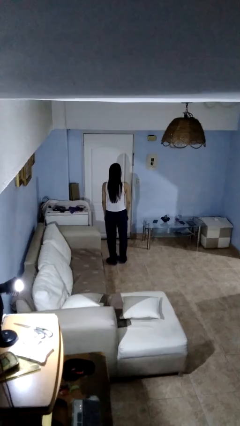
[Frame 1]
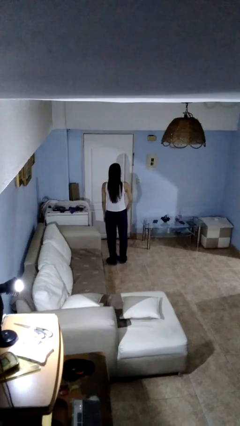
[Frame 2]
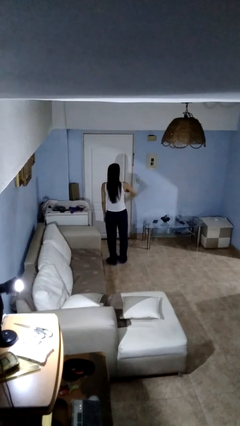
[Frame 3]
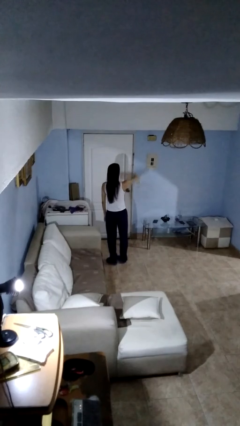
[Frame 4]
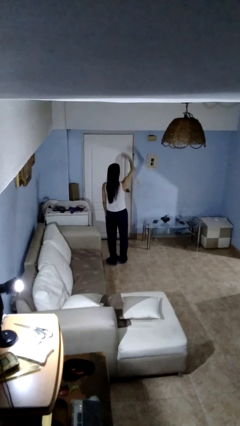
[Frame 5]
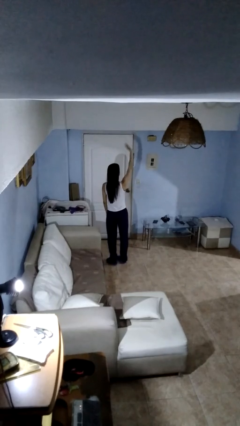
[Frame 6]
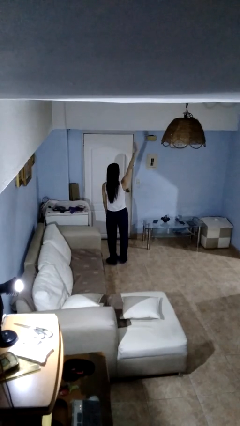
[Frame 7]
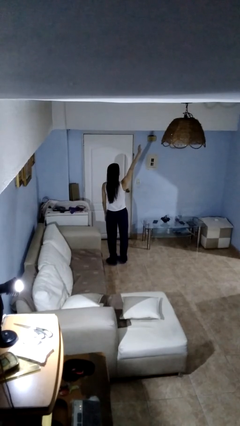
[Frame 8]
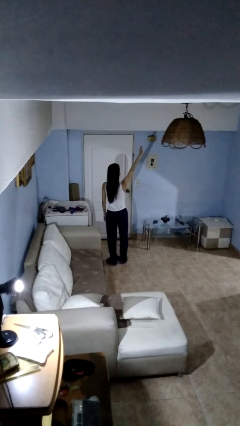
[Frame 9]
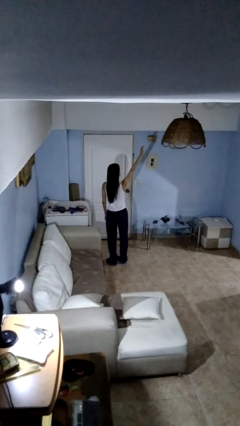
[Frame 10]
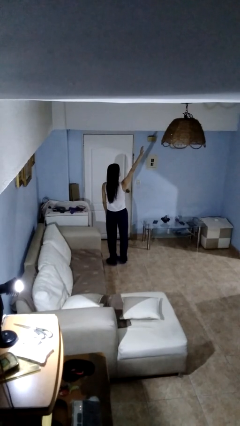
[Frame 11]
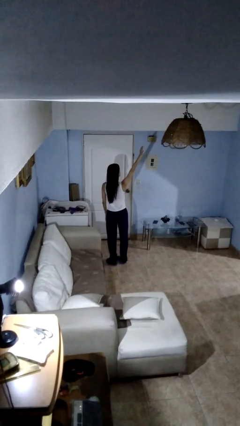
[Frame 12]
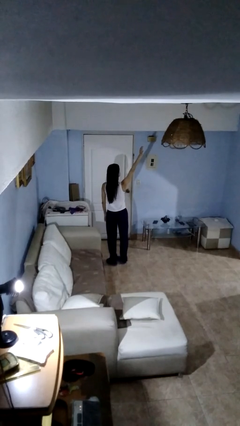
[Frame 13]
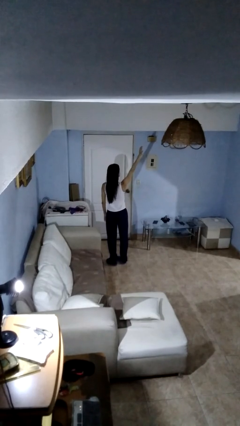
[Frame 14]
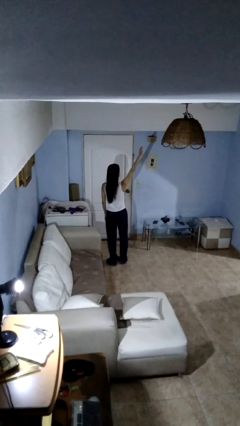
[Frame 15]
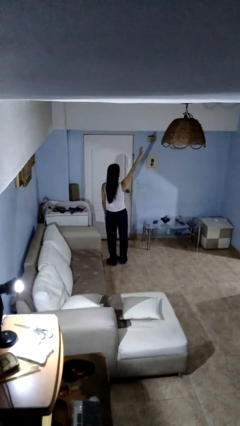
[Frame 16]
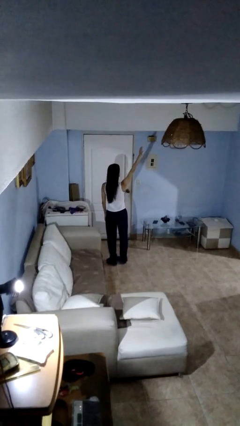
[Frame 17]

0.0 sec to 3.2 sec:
person gestures swipe up

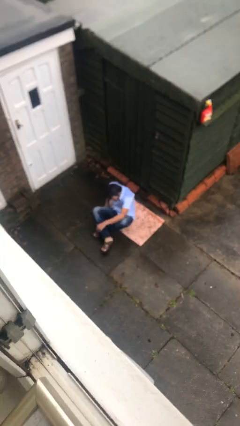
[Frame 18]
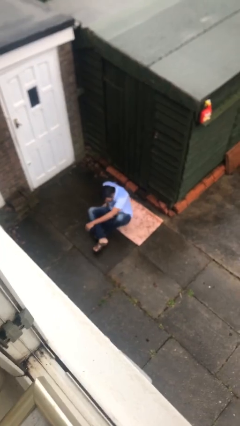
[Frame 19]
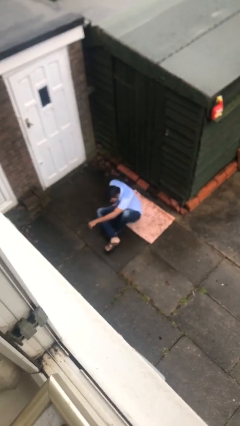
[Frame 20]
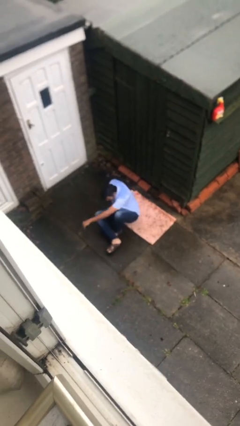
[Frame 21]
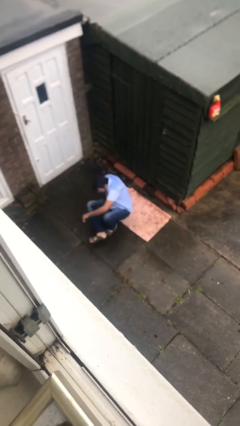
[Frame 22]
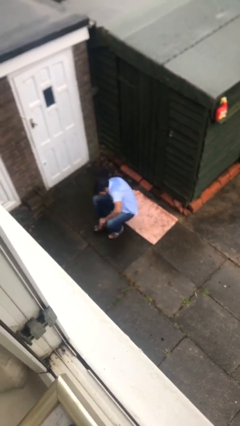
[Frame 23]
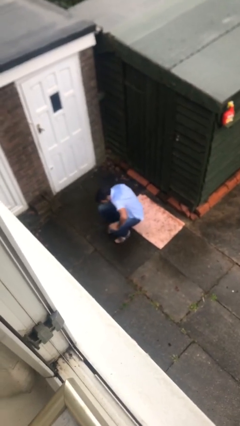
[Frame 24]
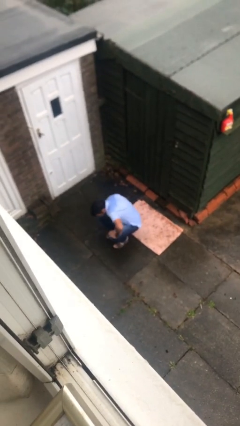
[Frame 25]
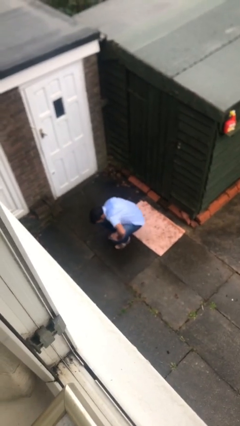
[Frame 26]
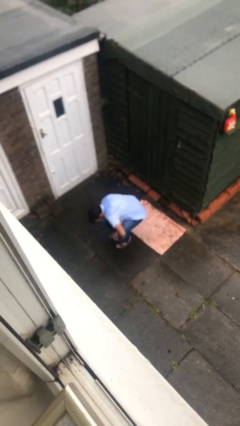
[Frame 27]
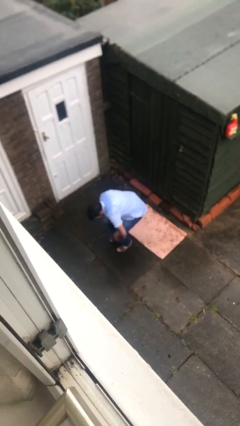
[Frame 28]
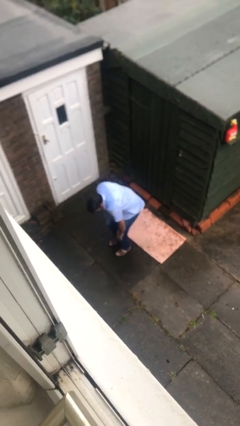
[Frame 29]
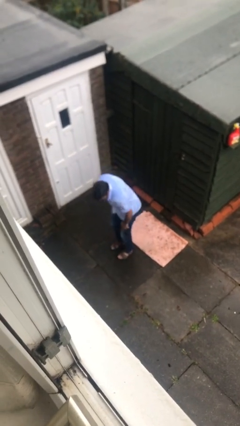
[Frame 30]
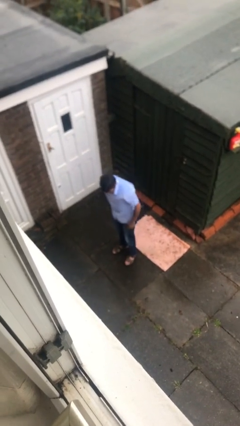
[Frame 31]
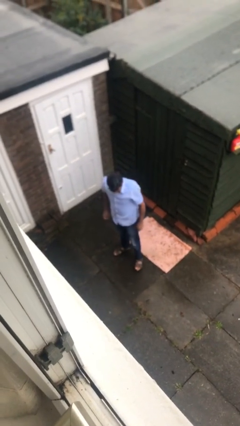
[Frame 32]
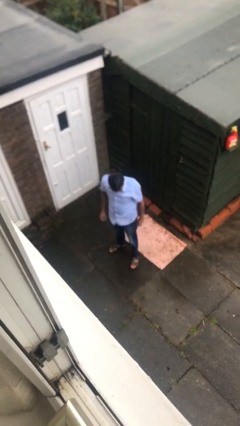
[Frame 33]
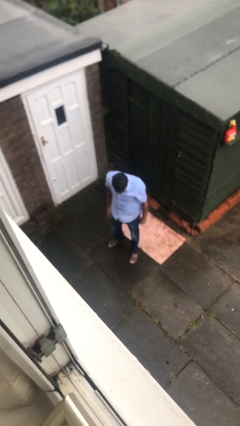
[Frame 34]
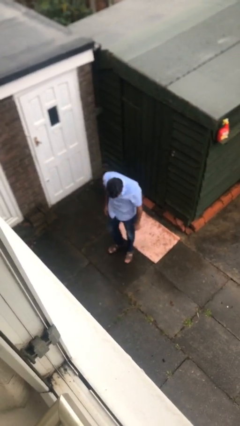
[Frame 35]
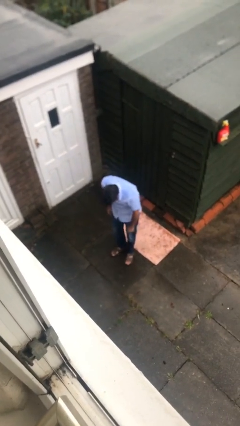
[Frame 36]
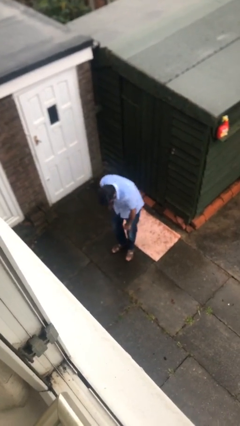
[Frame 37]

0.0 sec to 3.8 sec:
person stands up

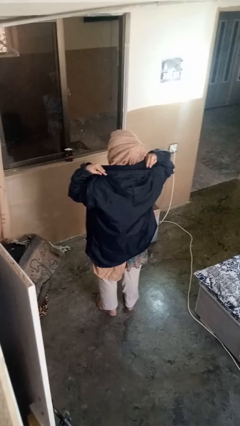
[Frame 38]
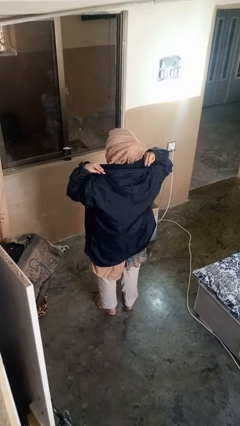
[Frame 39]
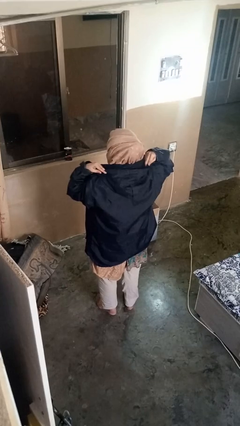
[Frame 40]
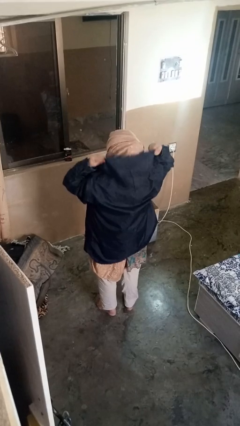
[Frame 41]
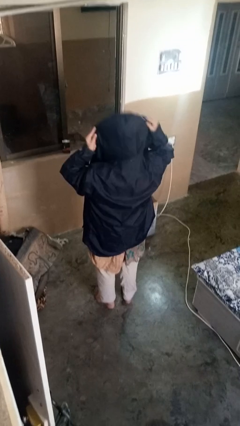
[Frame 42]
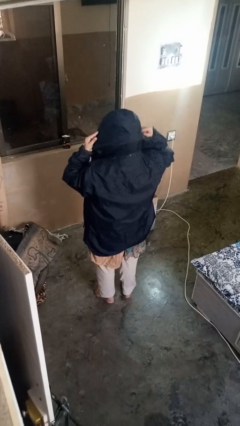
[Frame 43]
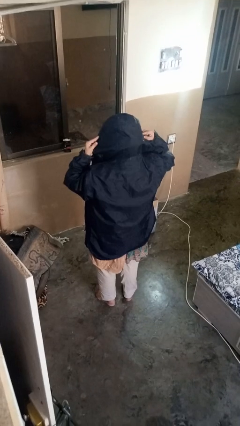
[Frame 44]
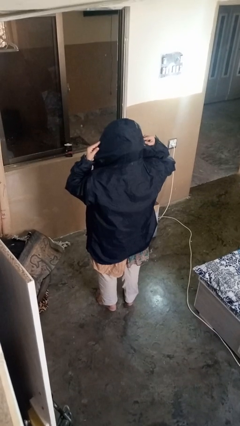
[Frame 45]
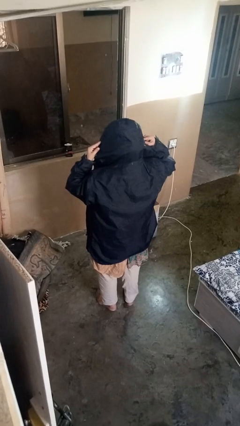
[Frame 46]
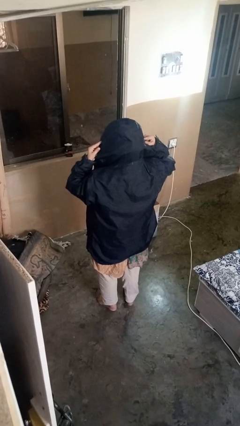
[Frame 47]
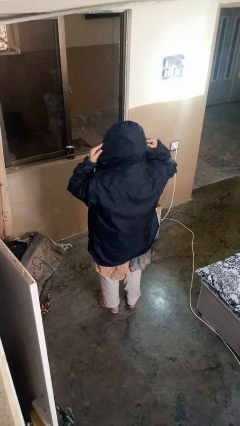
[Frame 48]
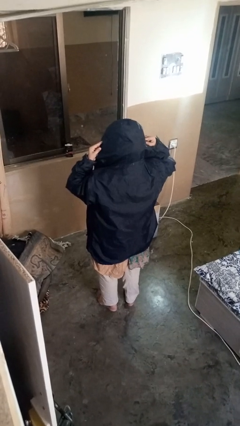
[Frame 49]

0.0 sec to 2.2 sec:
person puts on hat

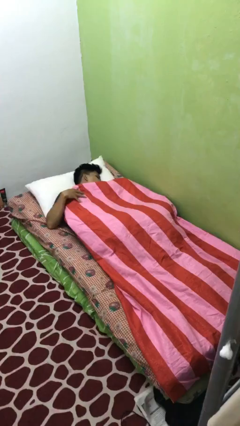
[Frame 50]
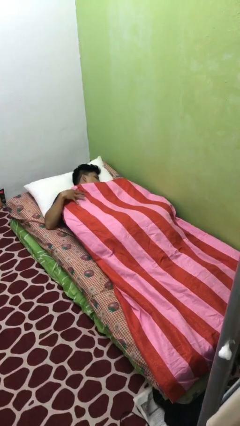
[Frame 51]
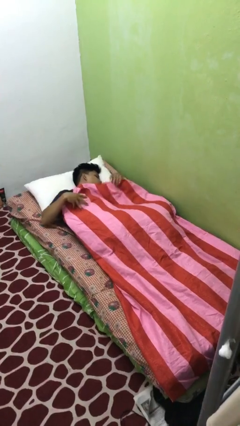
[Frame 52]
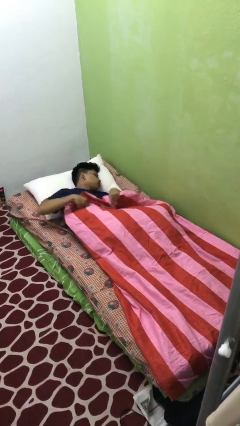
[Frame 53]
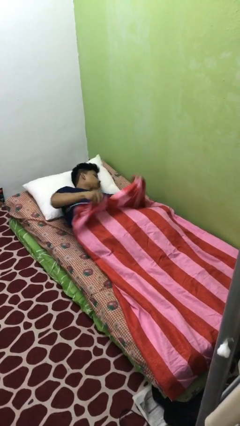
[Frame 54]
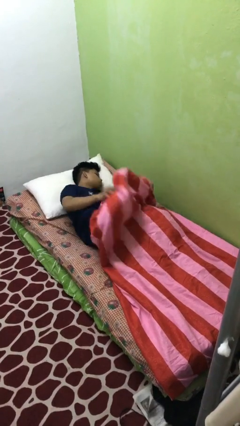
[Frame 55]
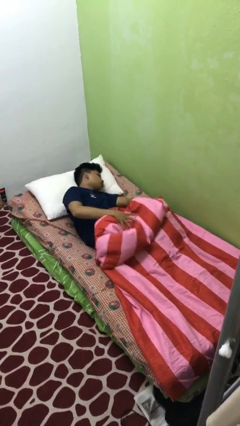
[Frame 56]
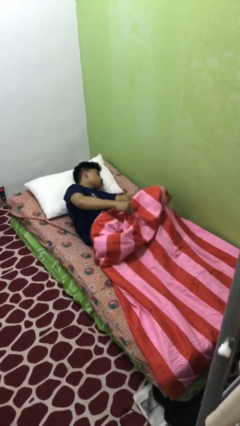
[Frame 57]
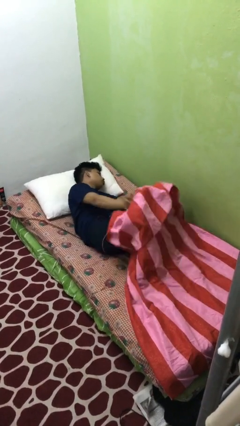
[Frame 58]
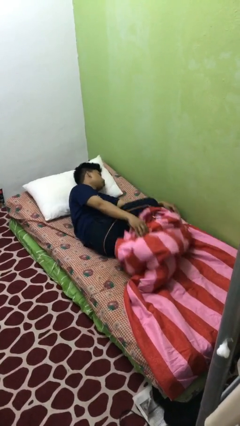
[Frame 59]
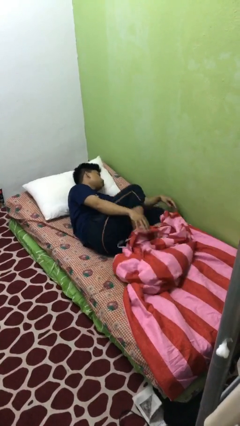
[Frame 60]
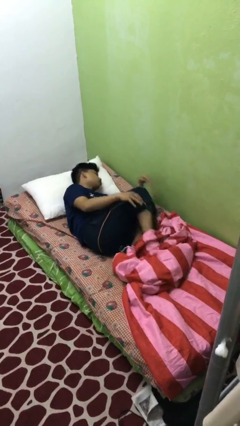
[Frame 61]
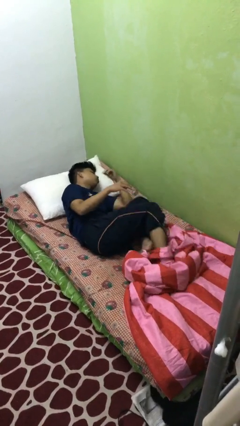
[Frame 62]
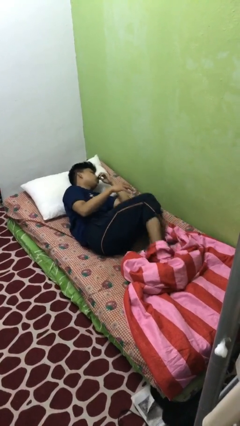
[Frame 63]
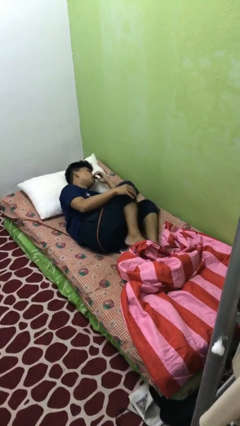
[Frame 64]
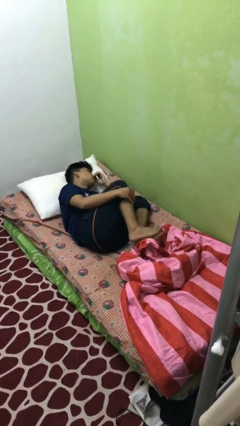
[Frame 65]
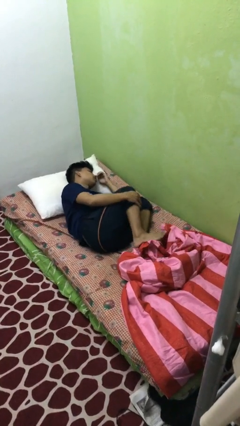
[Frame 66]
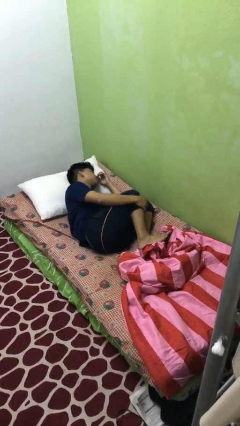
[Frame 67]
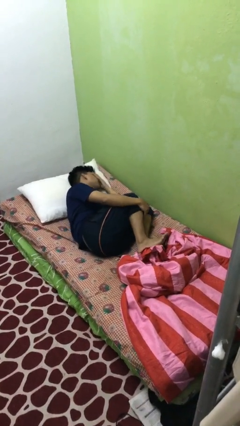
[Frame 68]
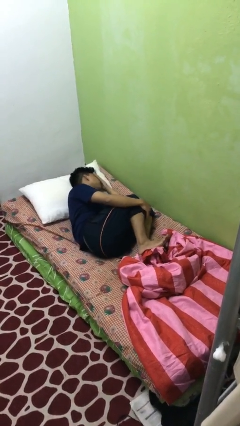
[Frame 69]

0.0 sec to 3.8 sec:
person uncovers with bedsheets

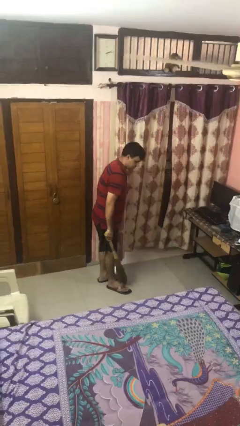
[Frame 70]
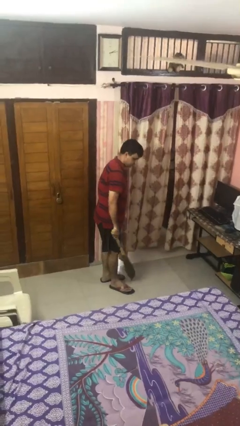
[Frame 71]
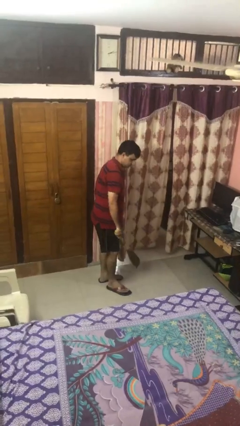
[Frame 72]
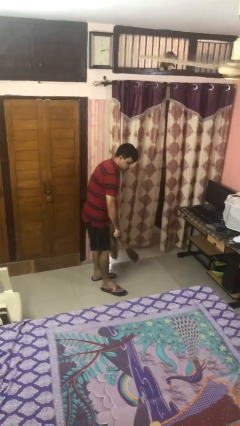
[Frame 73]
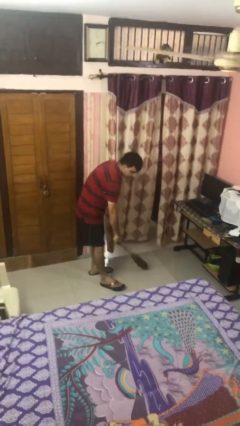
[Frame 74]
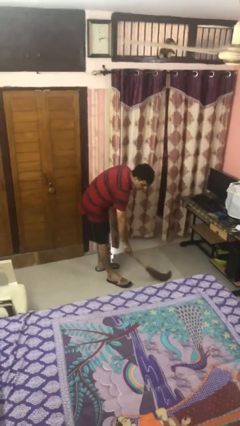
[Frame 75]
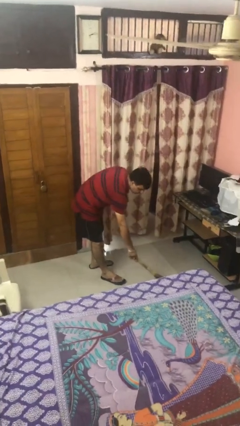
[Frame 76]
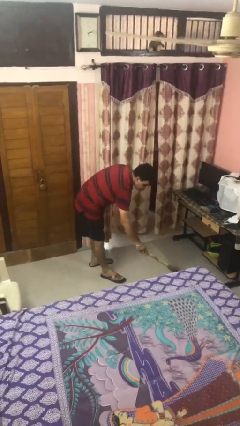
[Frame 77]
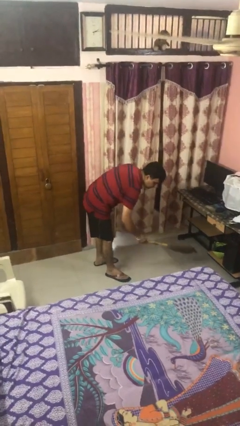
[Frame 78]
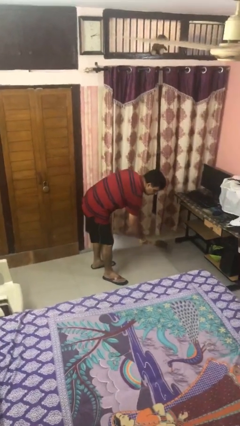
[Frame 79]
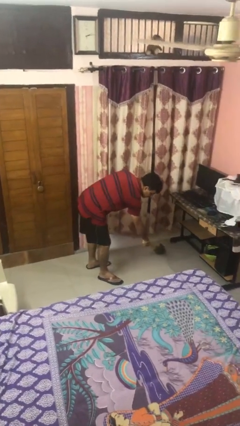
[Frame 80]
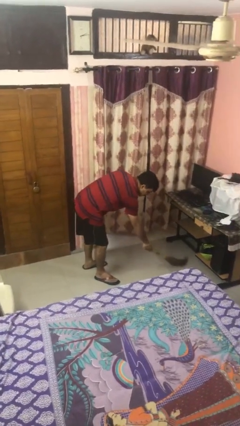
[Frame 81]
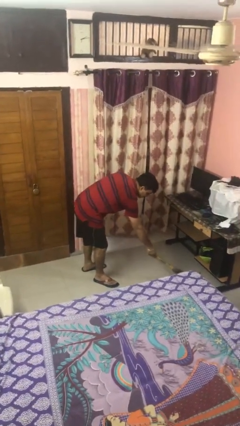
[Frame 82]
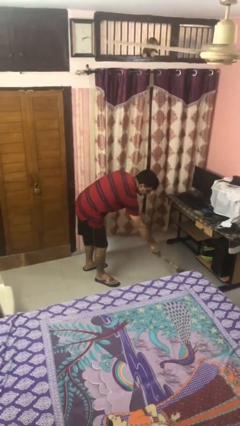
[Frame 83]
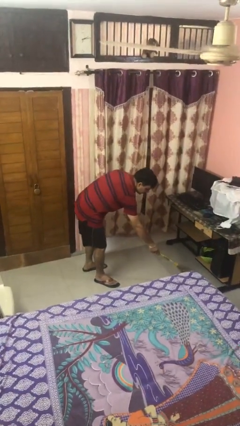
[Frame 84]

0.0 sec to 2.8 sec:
person sweeps floor

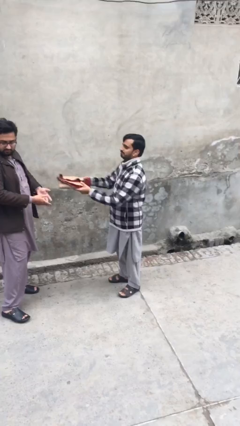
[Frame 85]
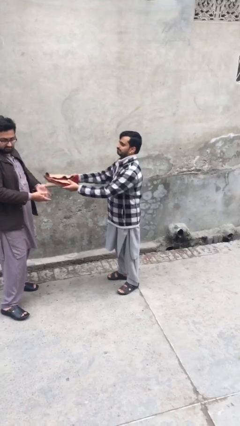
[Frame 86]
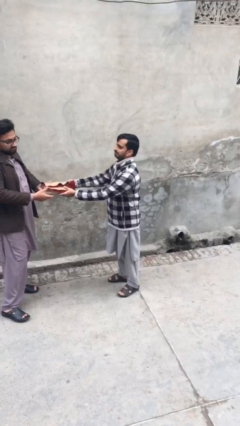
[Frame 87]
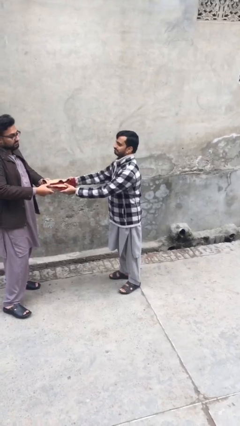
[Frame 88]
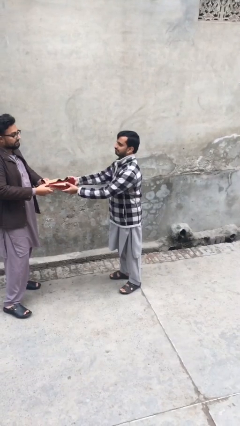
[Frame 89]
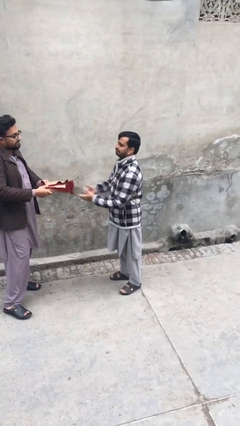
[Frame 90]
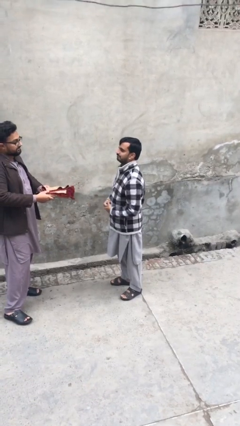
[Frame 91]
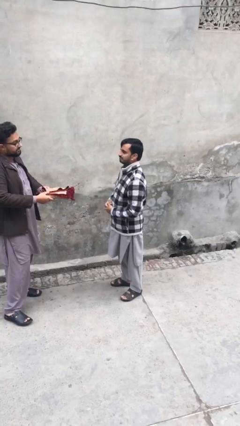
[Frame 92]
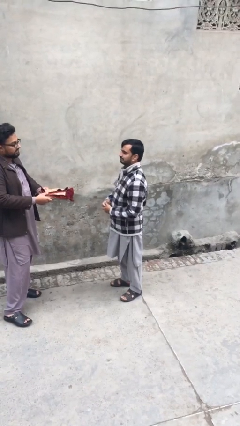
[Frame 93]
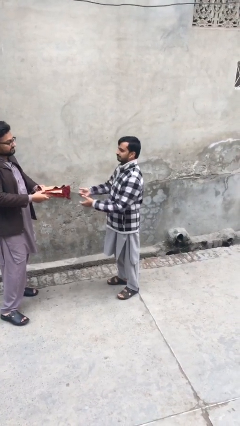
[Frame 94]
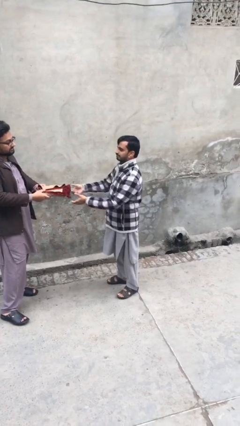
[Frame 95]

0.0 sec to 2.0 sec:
person transfers object to person
